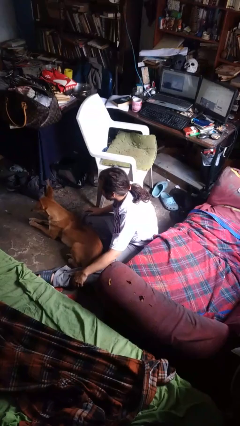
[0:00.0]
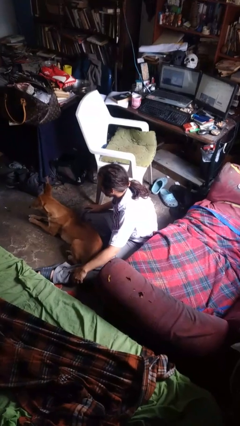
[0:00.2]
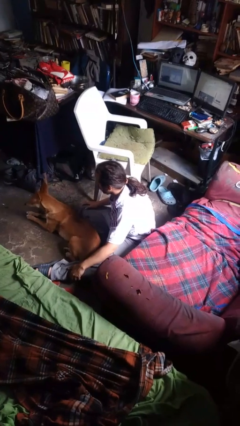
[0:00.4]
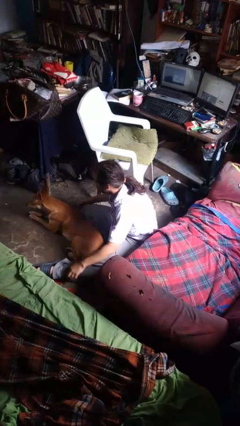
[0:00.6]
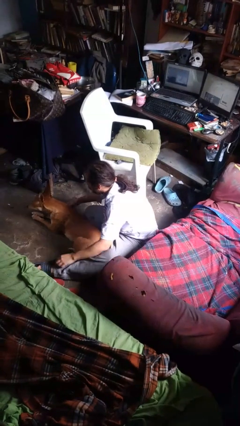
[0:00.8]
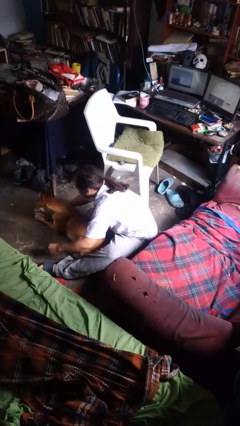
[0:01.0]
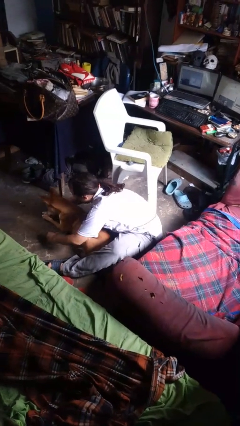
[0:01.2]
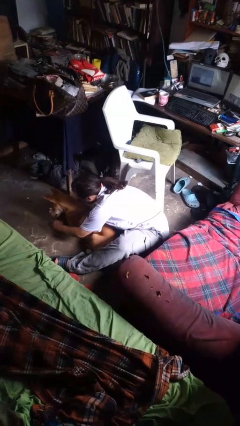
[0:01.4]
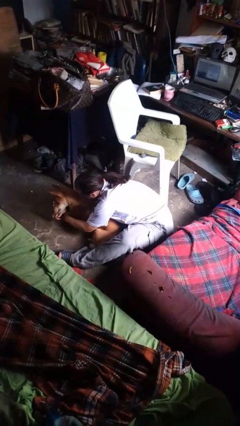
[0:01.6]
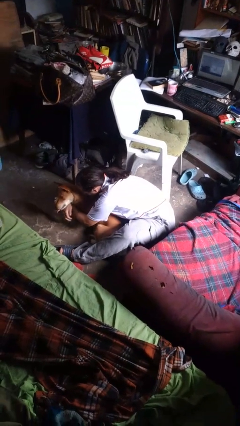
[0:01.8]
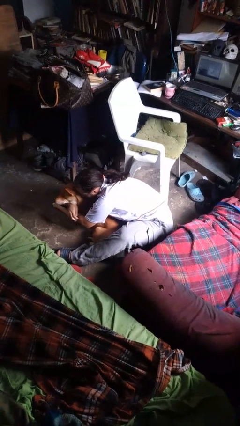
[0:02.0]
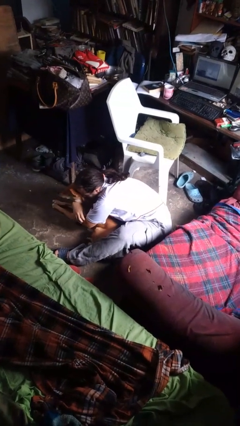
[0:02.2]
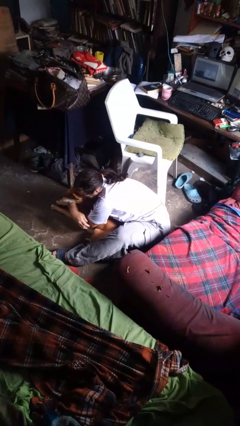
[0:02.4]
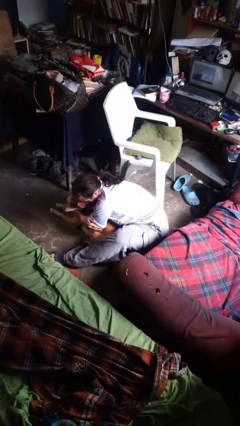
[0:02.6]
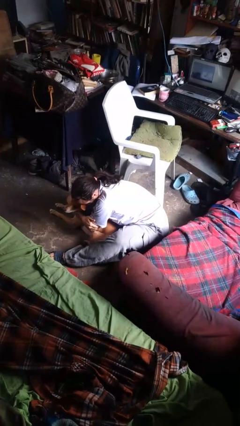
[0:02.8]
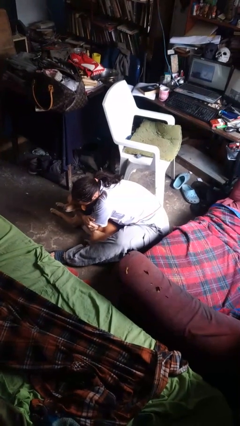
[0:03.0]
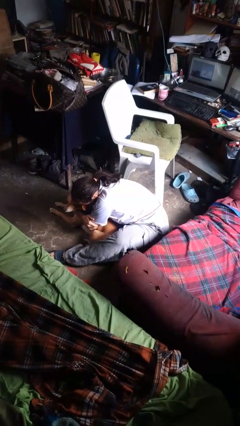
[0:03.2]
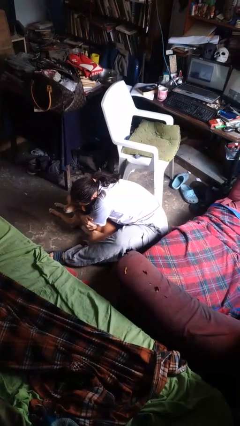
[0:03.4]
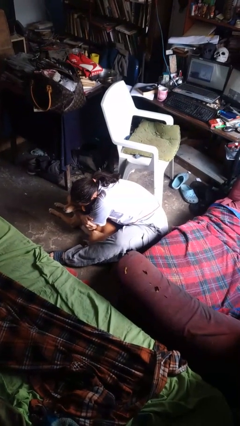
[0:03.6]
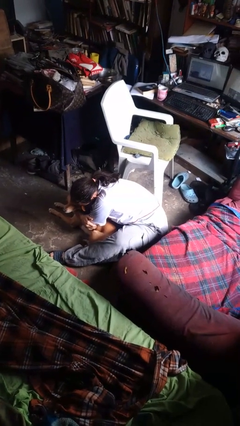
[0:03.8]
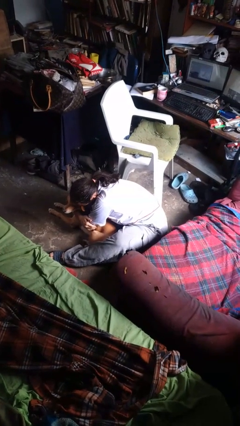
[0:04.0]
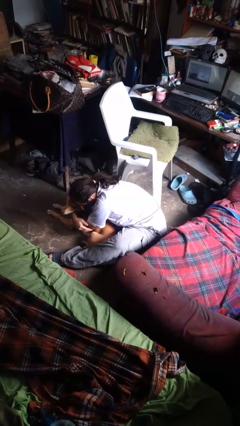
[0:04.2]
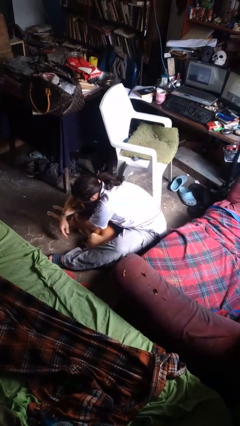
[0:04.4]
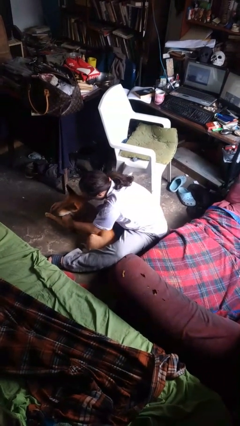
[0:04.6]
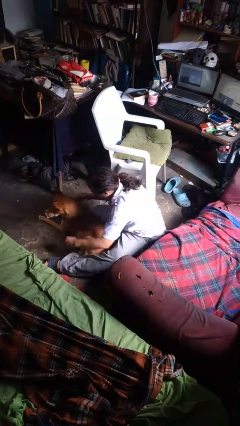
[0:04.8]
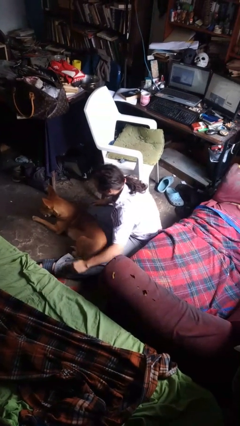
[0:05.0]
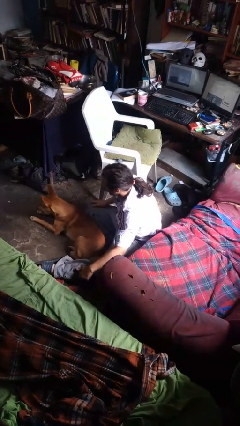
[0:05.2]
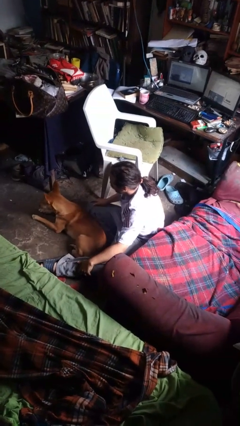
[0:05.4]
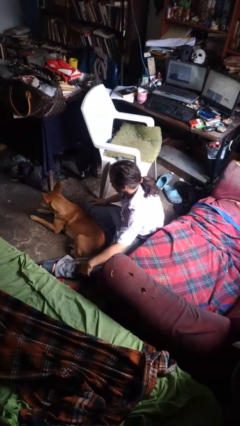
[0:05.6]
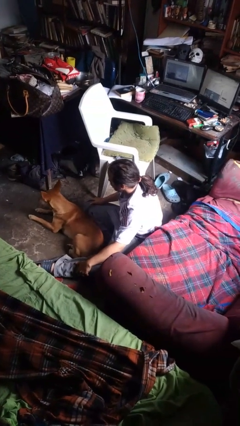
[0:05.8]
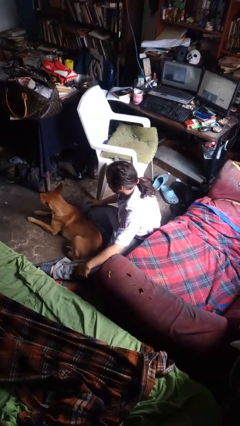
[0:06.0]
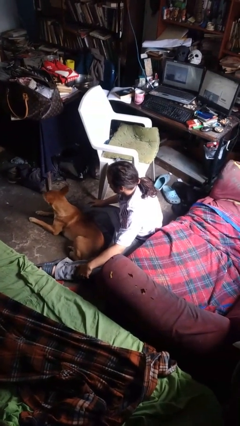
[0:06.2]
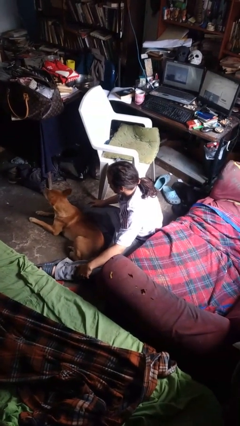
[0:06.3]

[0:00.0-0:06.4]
person hugs dog

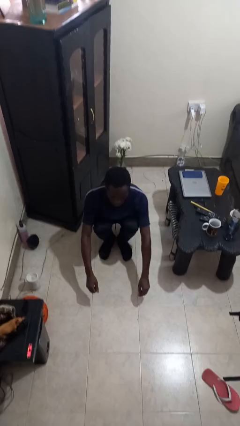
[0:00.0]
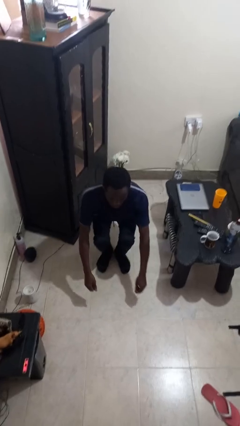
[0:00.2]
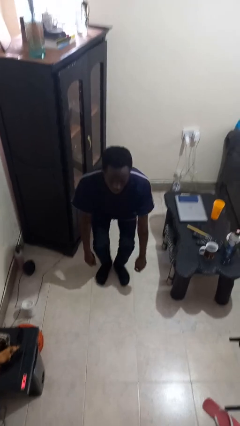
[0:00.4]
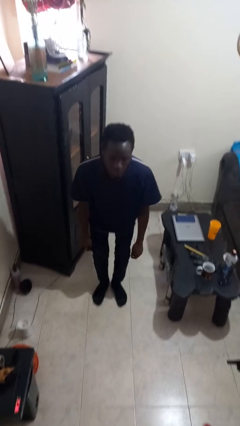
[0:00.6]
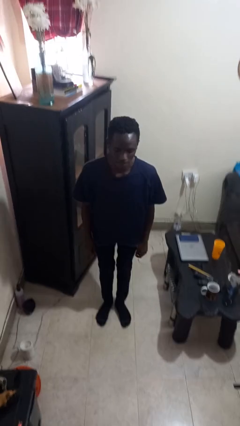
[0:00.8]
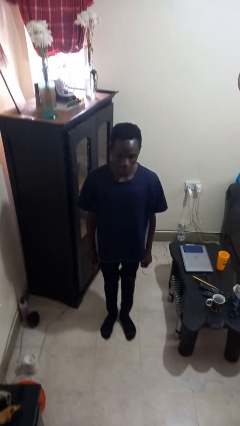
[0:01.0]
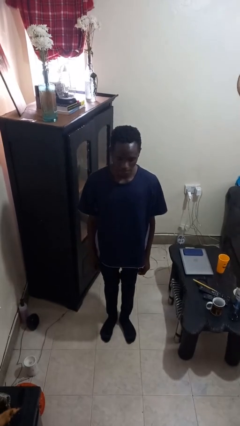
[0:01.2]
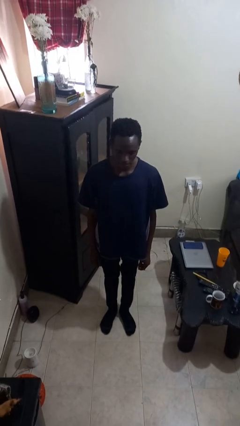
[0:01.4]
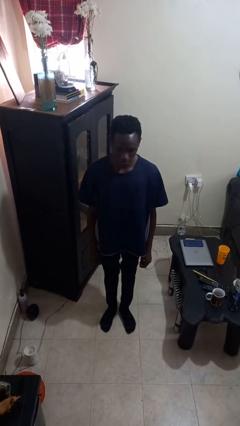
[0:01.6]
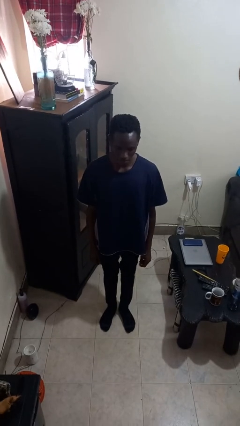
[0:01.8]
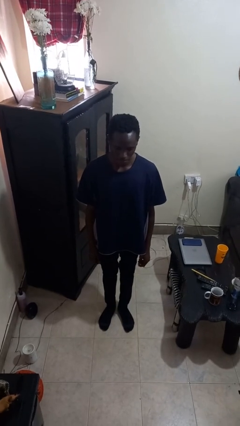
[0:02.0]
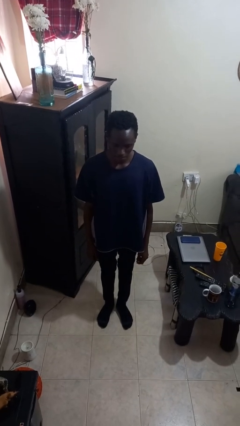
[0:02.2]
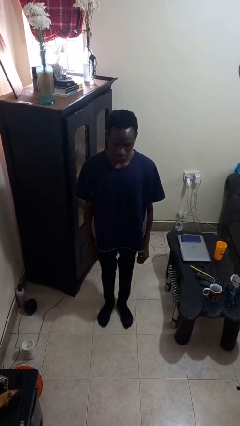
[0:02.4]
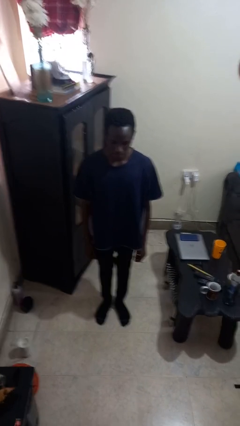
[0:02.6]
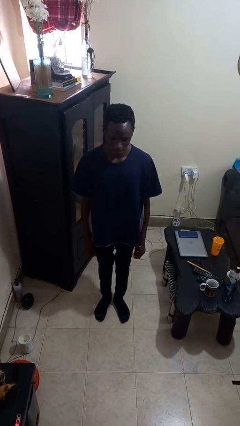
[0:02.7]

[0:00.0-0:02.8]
person stands up

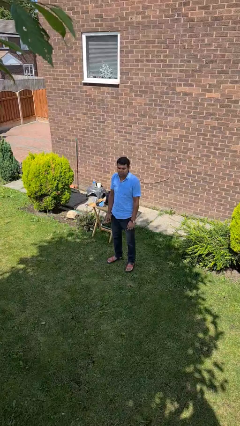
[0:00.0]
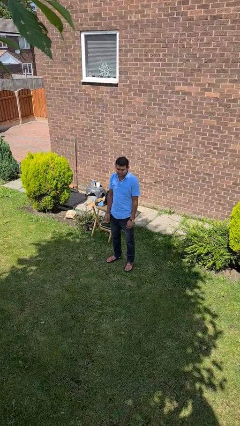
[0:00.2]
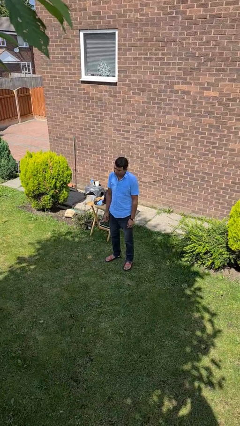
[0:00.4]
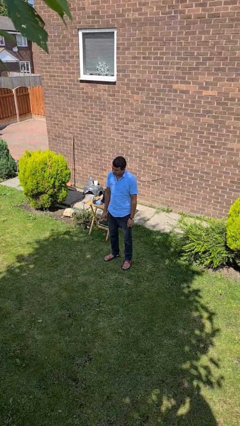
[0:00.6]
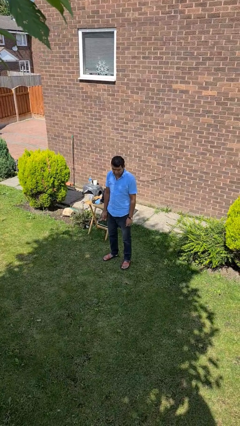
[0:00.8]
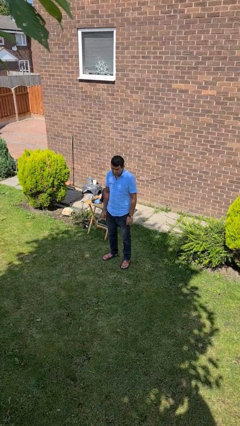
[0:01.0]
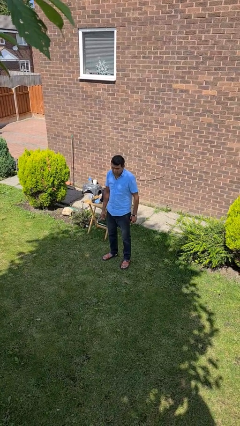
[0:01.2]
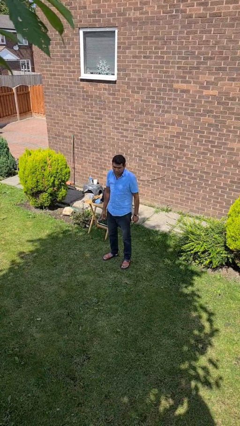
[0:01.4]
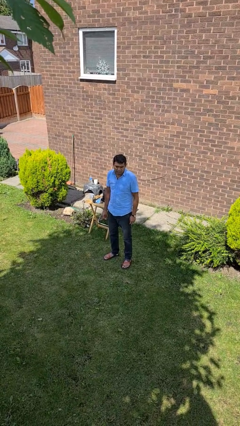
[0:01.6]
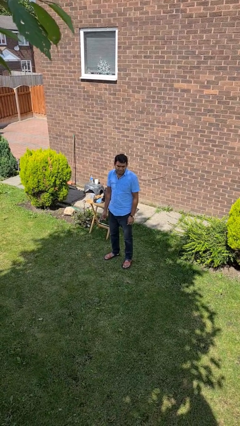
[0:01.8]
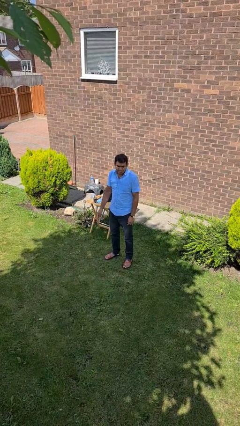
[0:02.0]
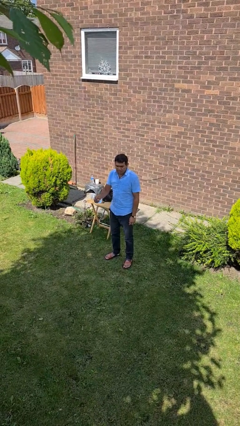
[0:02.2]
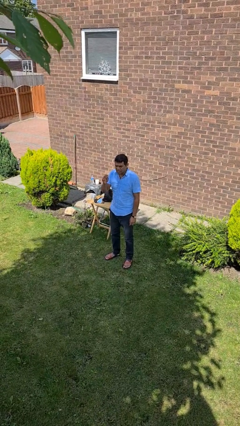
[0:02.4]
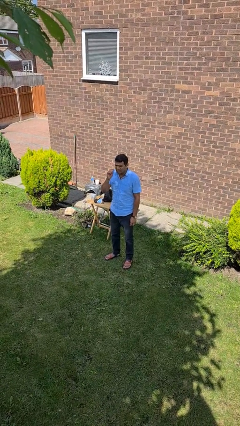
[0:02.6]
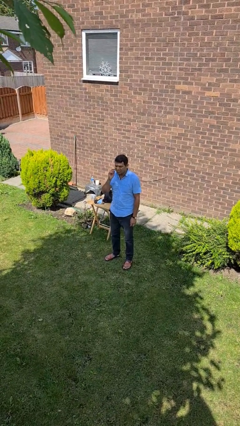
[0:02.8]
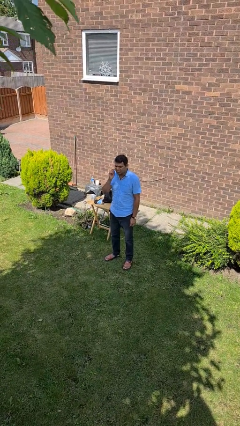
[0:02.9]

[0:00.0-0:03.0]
person flosses

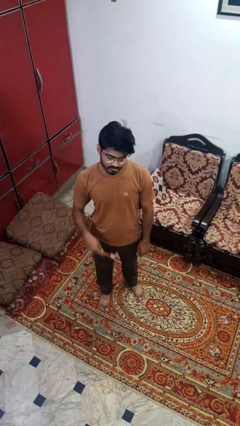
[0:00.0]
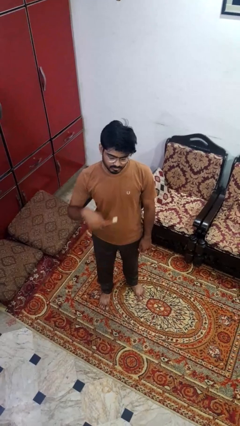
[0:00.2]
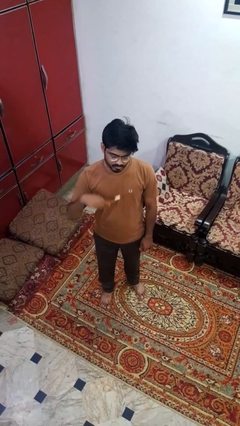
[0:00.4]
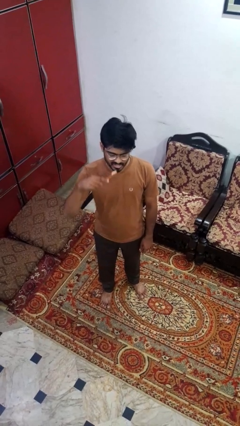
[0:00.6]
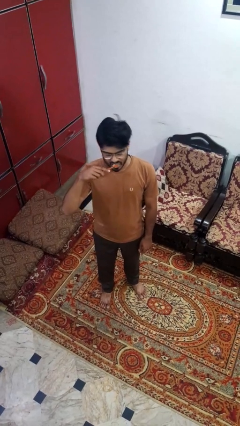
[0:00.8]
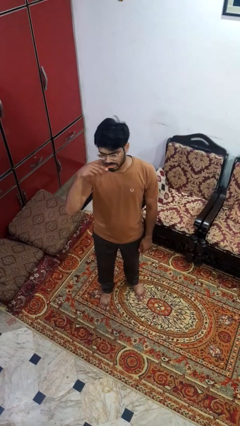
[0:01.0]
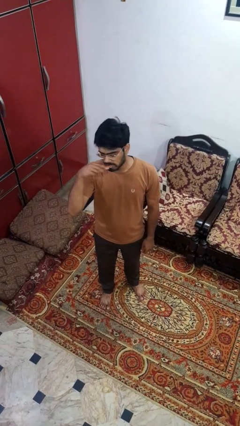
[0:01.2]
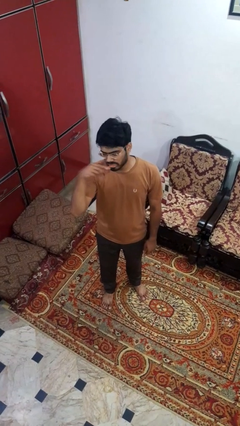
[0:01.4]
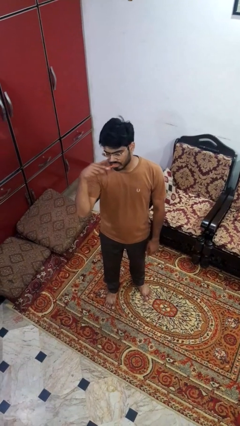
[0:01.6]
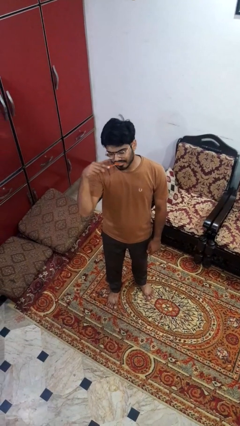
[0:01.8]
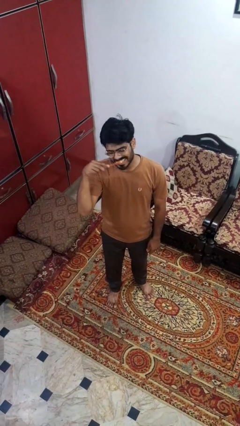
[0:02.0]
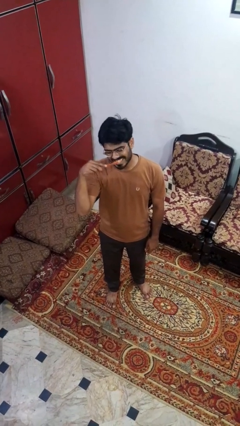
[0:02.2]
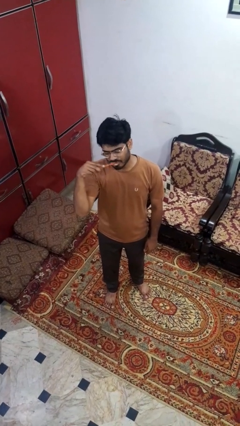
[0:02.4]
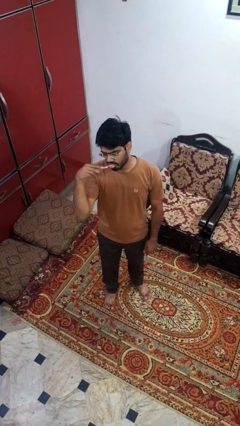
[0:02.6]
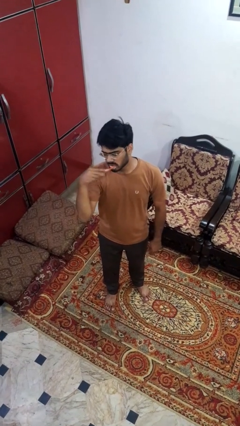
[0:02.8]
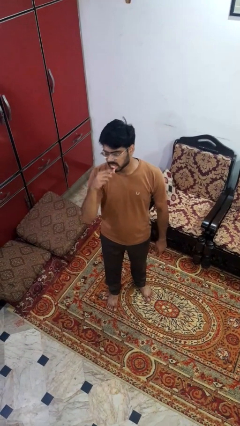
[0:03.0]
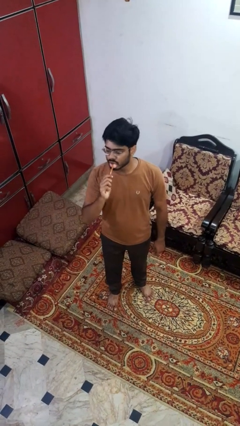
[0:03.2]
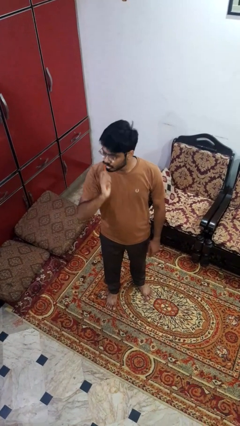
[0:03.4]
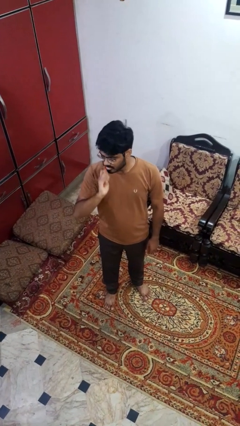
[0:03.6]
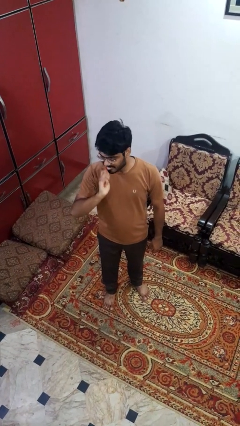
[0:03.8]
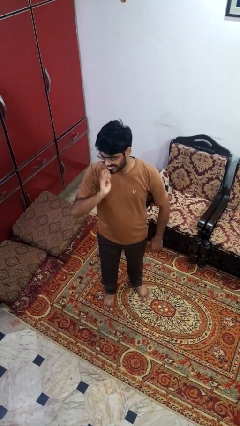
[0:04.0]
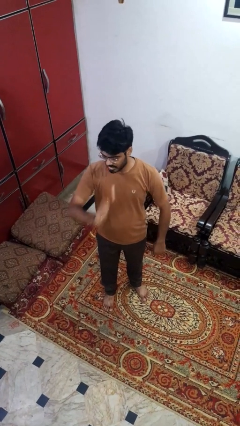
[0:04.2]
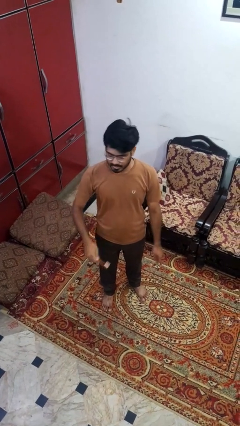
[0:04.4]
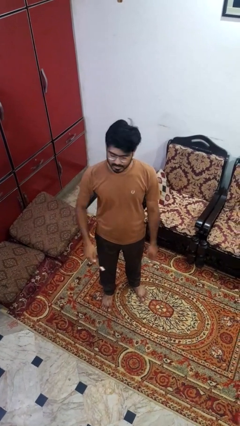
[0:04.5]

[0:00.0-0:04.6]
person brushes teeth

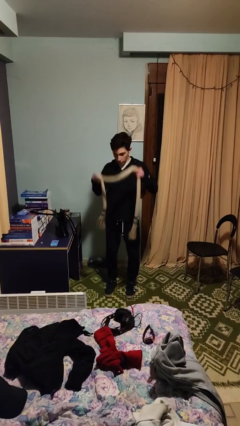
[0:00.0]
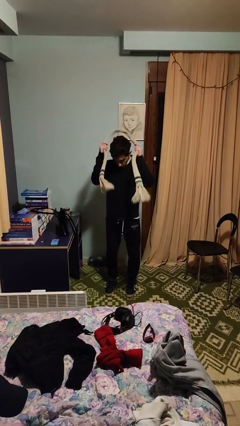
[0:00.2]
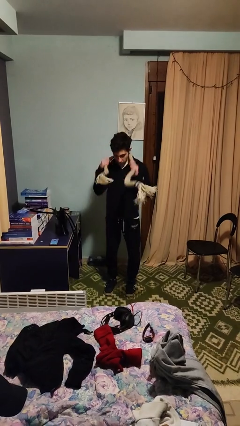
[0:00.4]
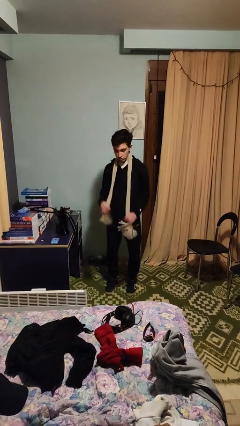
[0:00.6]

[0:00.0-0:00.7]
person puts on scarf
